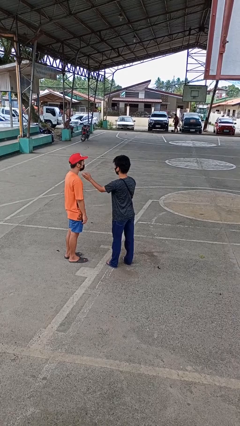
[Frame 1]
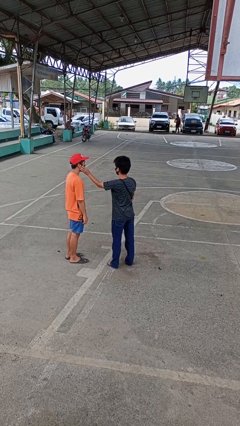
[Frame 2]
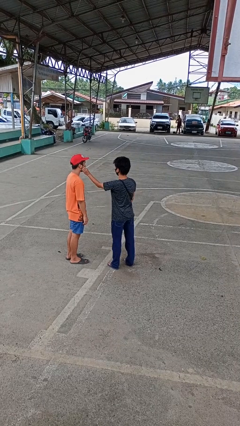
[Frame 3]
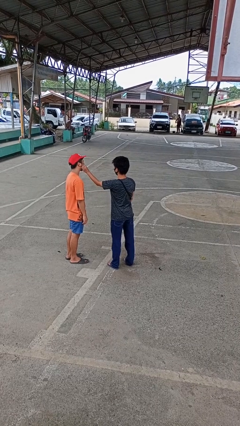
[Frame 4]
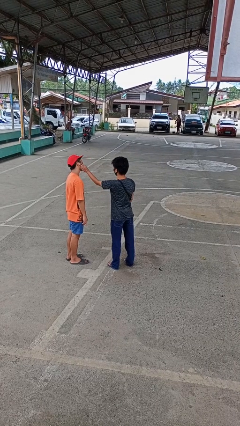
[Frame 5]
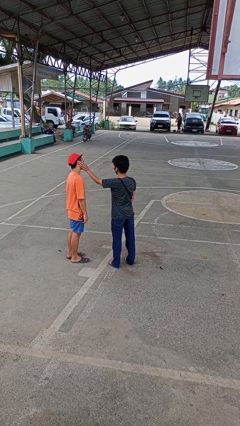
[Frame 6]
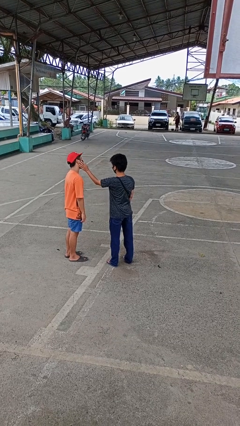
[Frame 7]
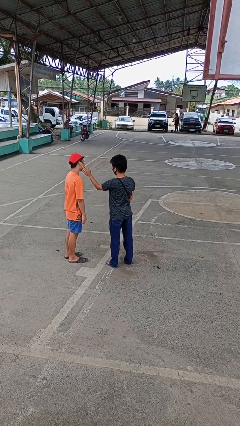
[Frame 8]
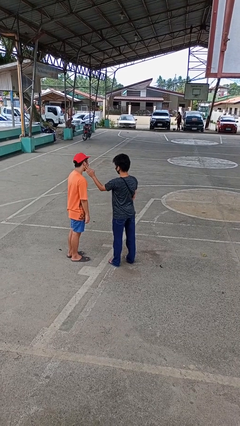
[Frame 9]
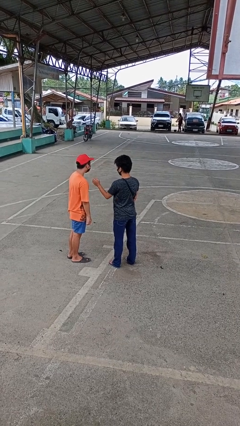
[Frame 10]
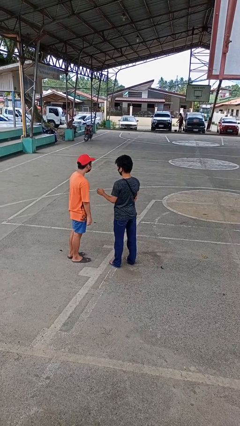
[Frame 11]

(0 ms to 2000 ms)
person touches face of person

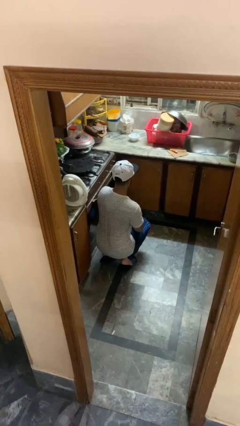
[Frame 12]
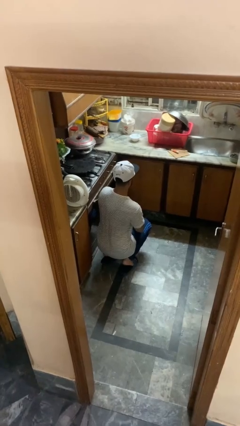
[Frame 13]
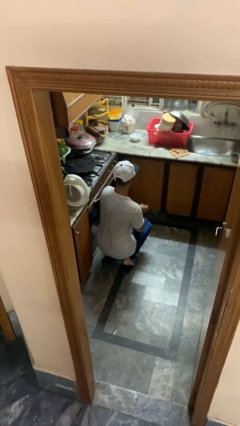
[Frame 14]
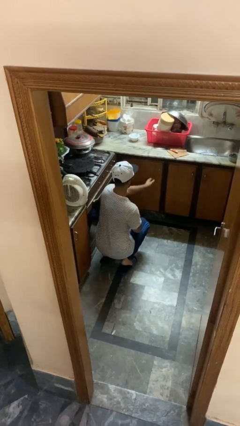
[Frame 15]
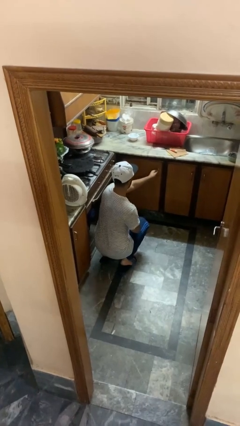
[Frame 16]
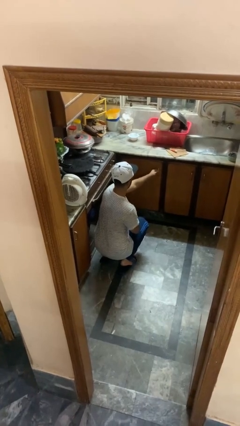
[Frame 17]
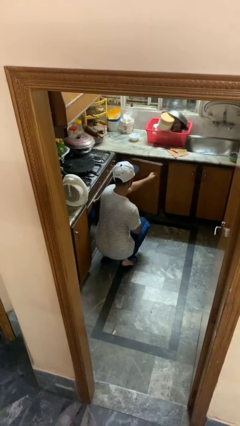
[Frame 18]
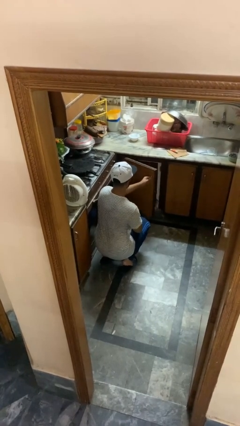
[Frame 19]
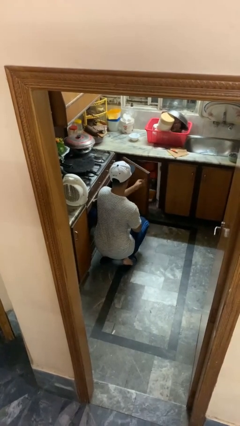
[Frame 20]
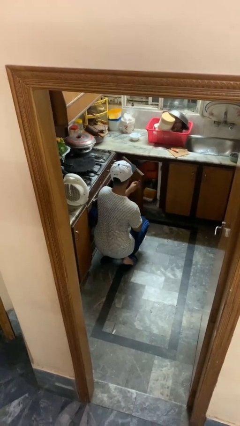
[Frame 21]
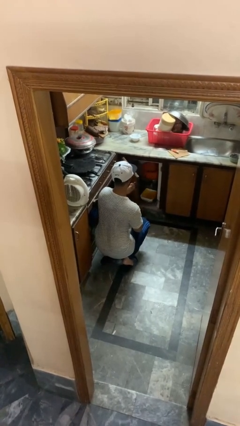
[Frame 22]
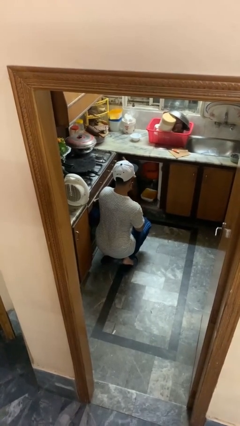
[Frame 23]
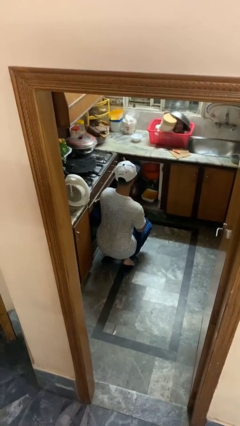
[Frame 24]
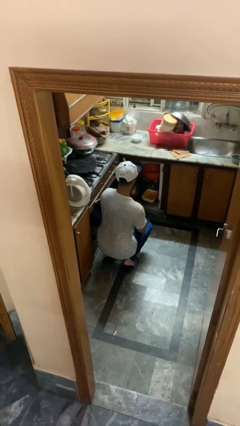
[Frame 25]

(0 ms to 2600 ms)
person opens kitchen drawer

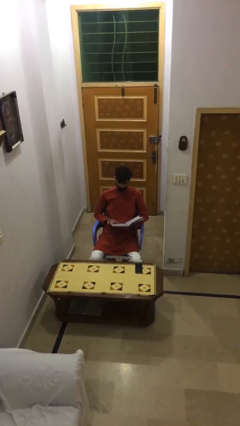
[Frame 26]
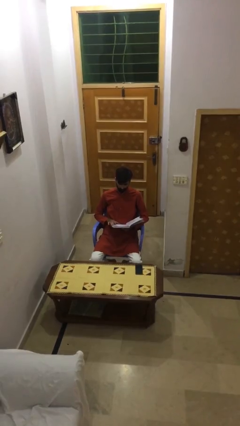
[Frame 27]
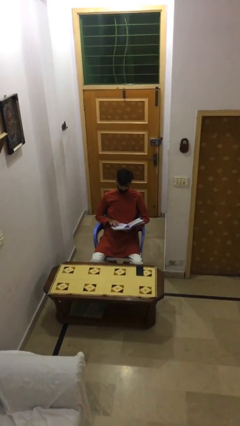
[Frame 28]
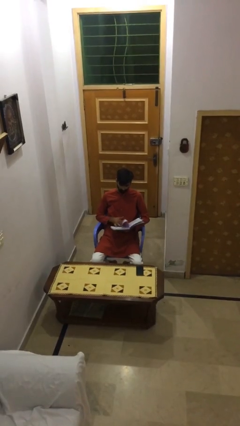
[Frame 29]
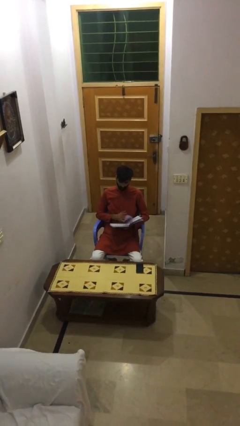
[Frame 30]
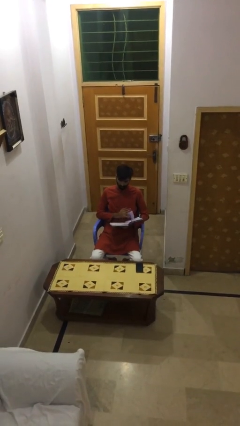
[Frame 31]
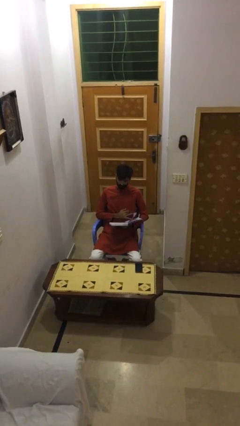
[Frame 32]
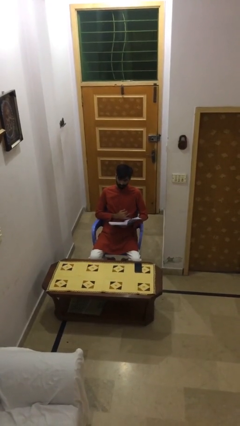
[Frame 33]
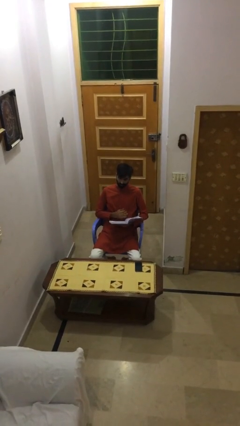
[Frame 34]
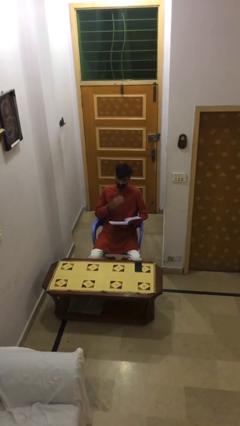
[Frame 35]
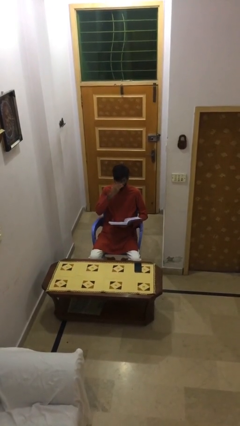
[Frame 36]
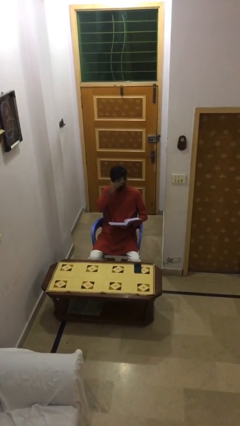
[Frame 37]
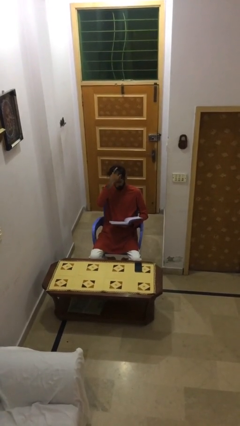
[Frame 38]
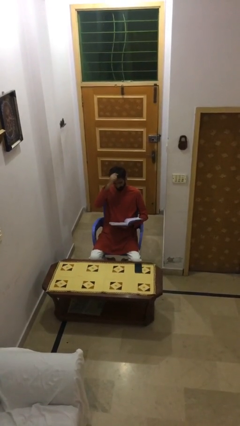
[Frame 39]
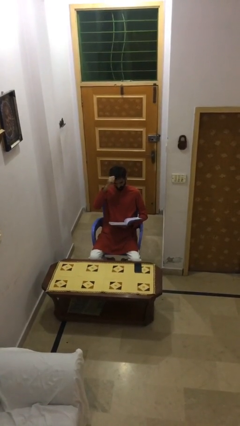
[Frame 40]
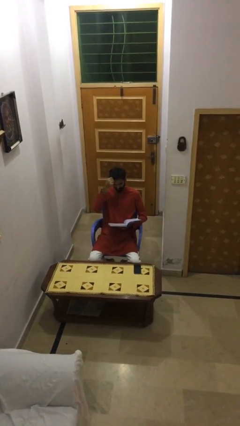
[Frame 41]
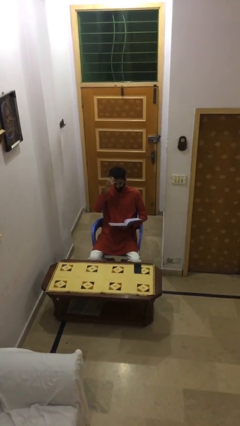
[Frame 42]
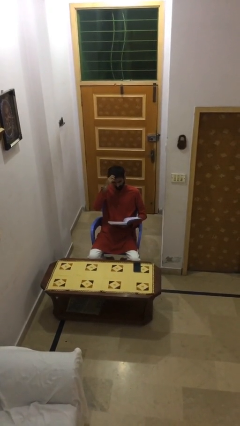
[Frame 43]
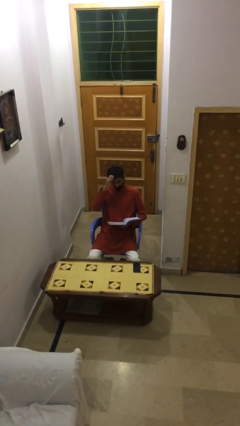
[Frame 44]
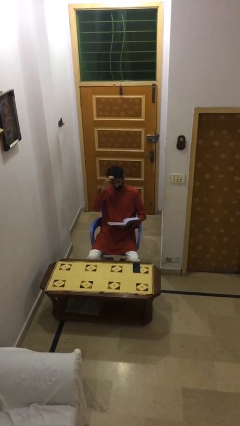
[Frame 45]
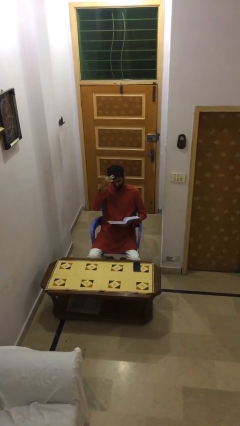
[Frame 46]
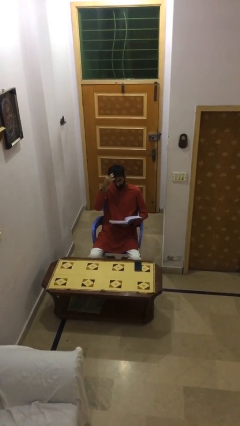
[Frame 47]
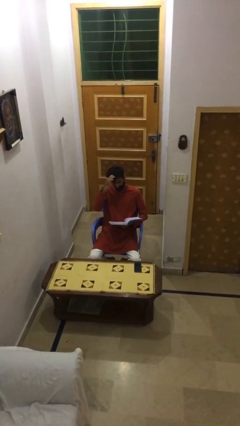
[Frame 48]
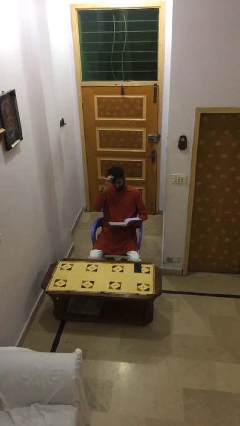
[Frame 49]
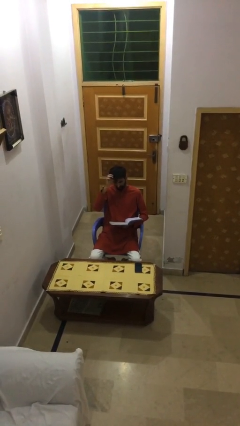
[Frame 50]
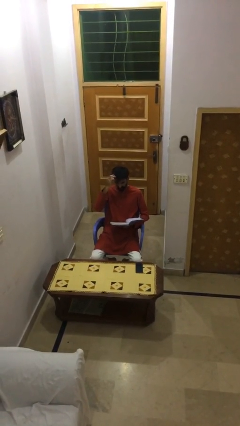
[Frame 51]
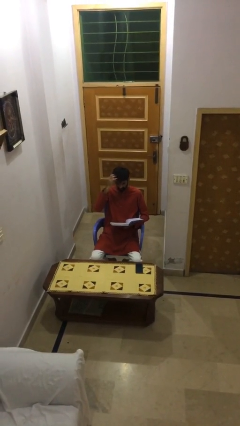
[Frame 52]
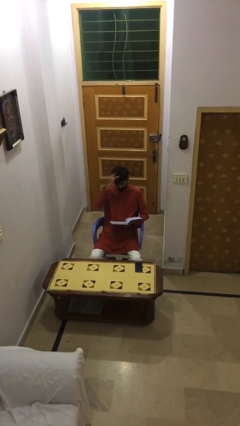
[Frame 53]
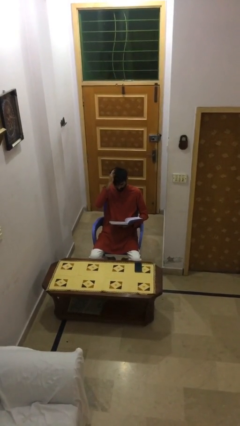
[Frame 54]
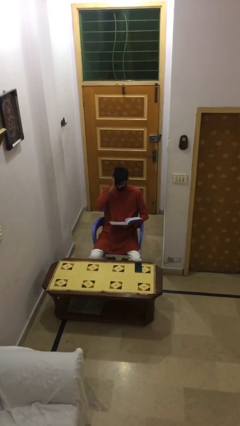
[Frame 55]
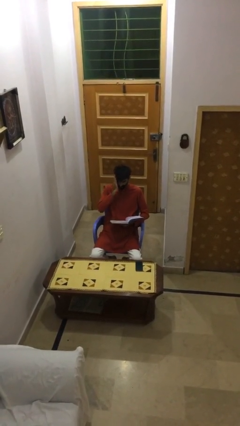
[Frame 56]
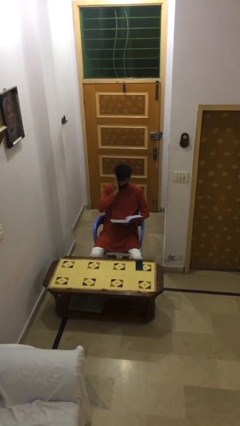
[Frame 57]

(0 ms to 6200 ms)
person reads document

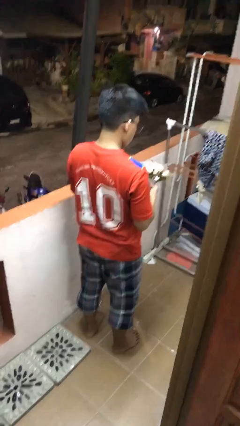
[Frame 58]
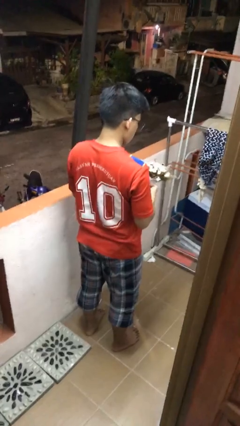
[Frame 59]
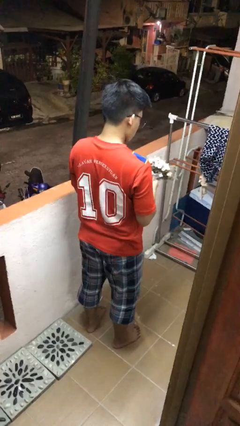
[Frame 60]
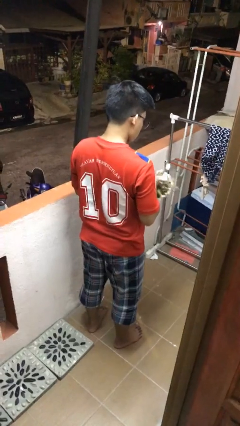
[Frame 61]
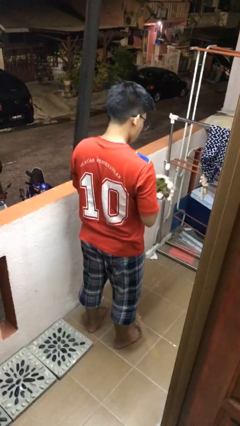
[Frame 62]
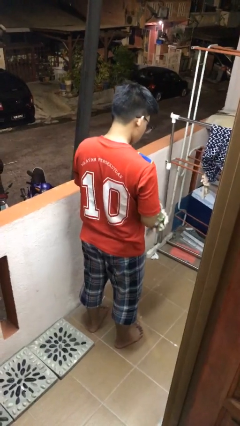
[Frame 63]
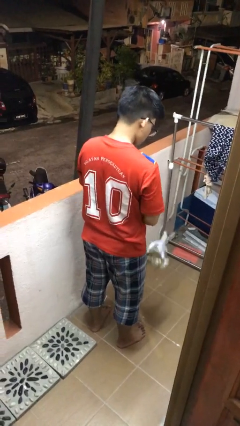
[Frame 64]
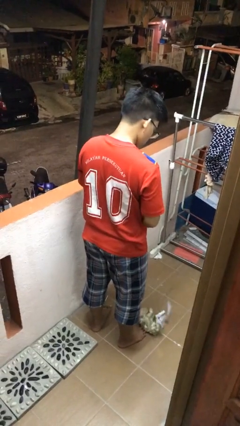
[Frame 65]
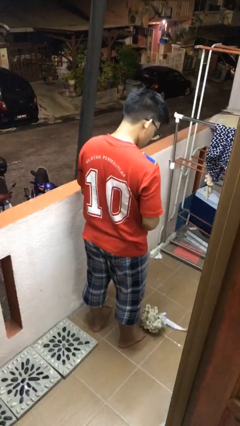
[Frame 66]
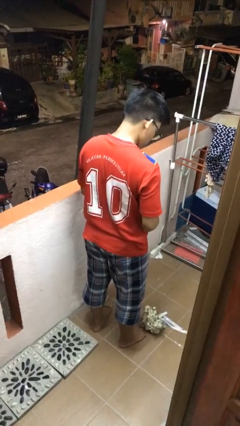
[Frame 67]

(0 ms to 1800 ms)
person drops object

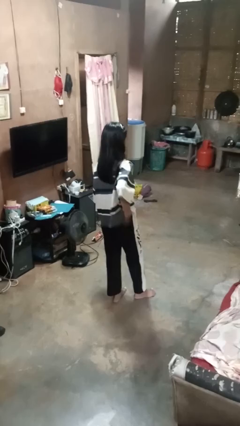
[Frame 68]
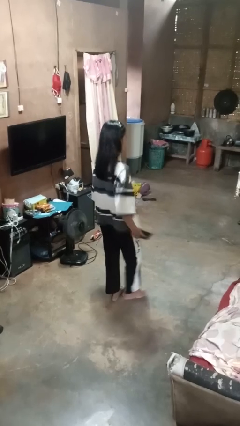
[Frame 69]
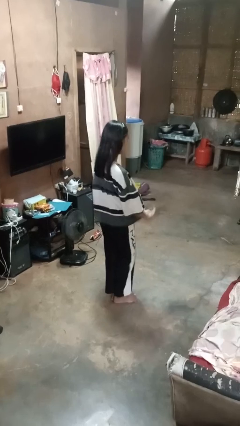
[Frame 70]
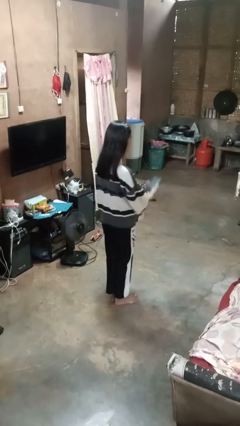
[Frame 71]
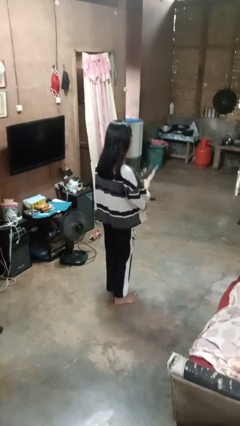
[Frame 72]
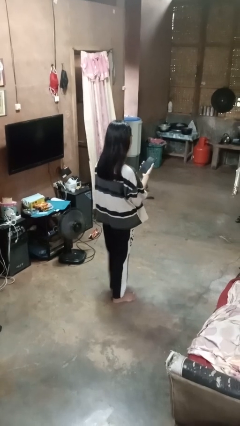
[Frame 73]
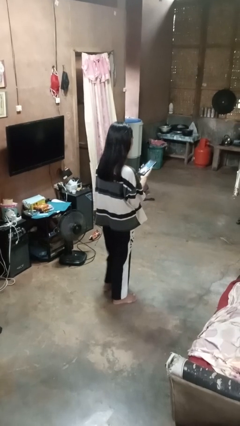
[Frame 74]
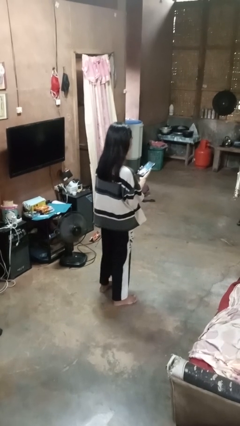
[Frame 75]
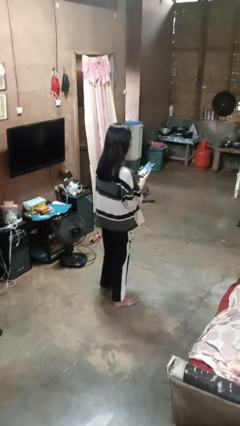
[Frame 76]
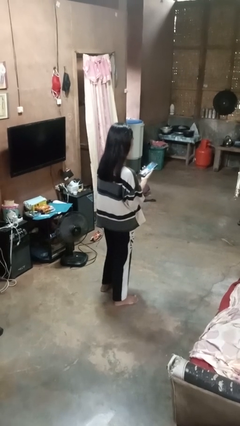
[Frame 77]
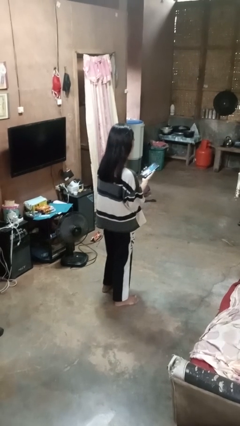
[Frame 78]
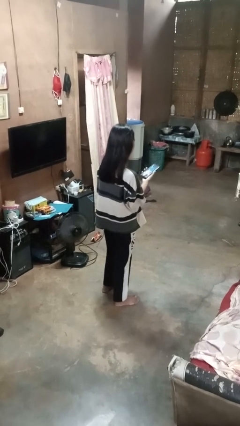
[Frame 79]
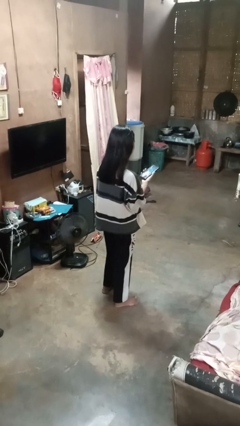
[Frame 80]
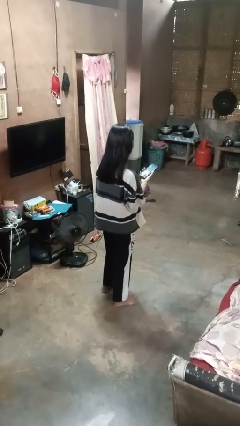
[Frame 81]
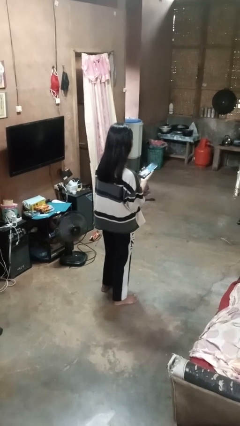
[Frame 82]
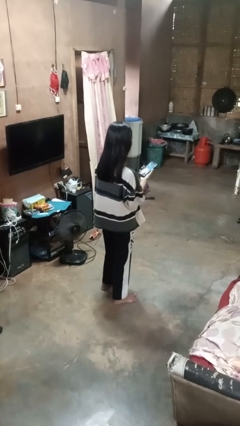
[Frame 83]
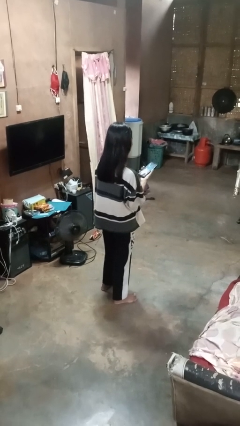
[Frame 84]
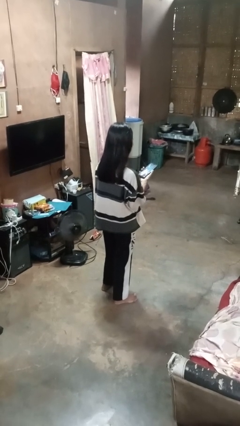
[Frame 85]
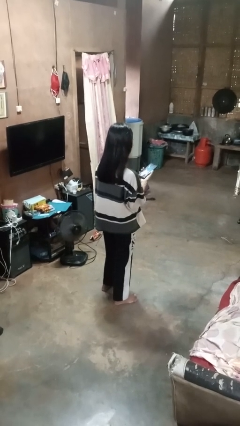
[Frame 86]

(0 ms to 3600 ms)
person takes phone from pocket

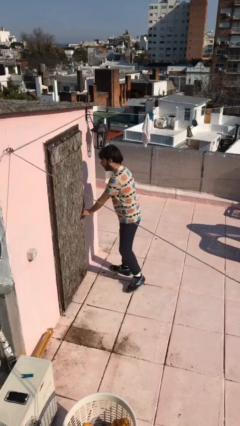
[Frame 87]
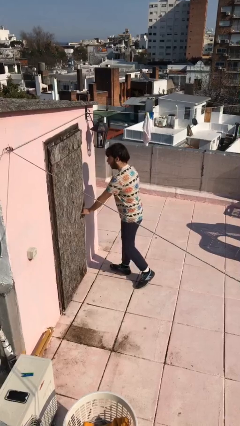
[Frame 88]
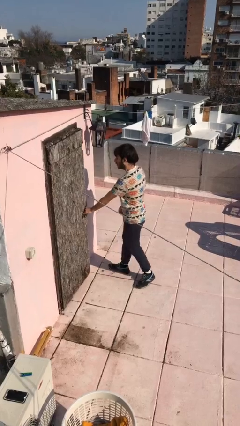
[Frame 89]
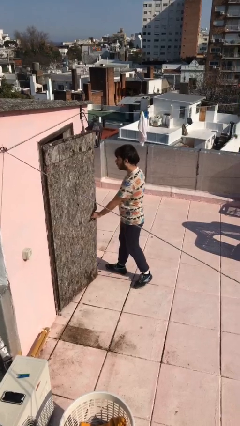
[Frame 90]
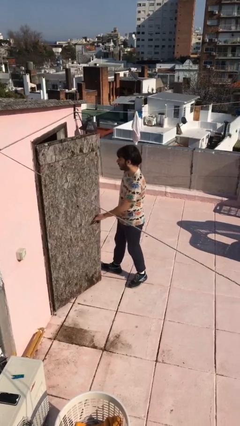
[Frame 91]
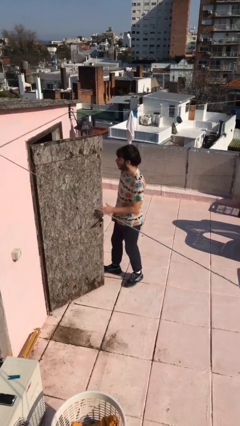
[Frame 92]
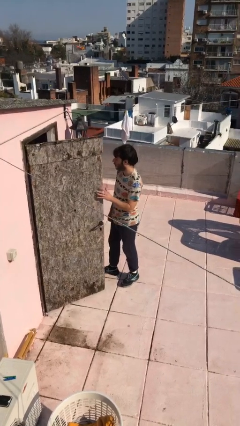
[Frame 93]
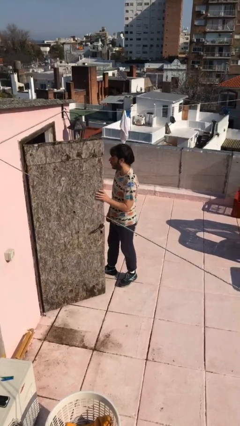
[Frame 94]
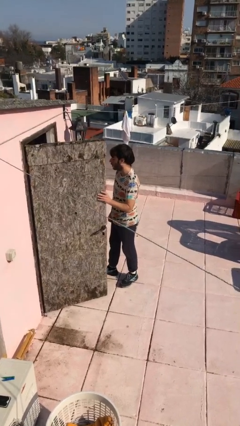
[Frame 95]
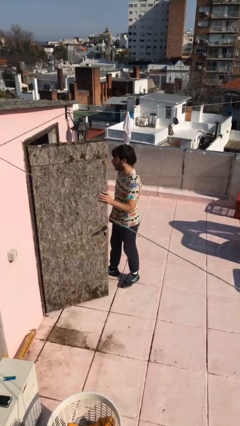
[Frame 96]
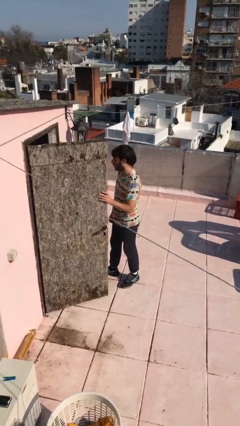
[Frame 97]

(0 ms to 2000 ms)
person opens facility door
